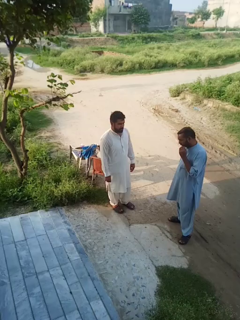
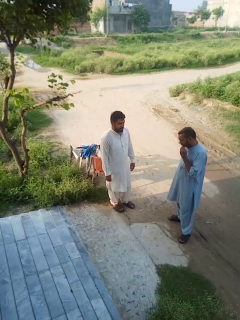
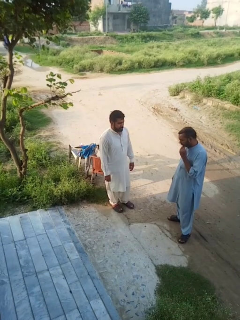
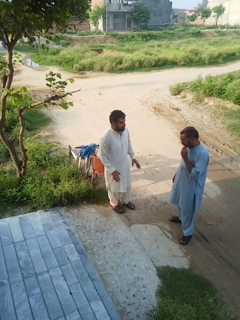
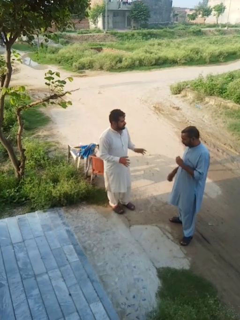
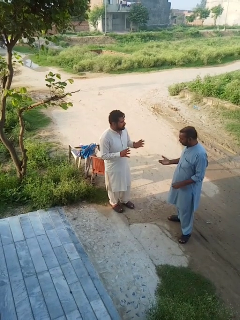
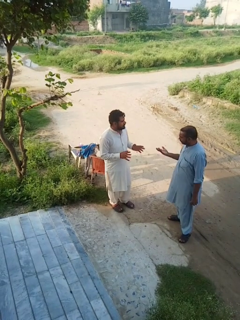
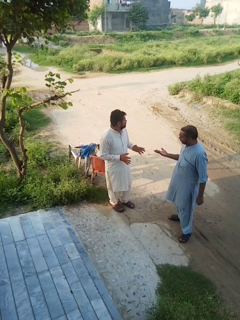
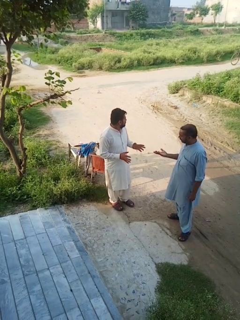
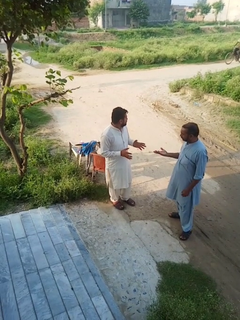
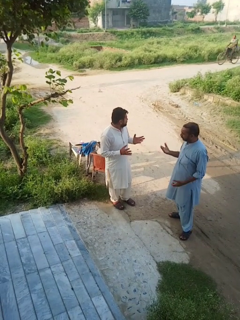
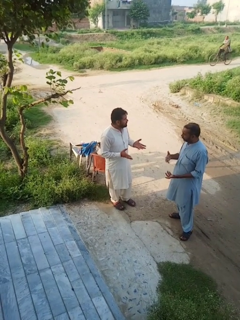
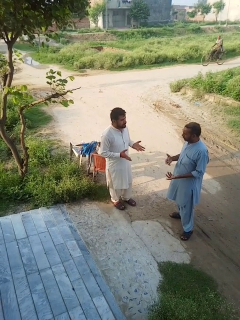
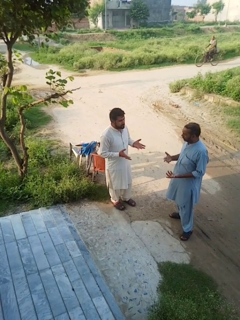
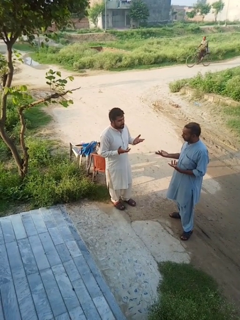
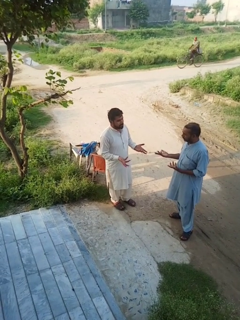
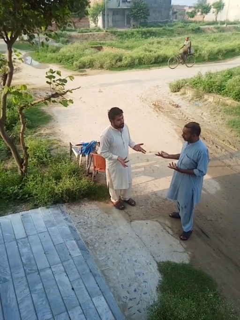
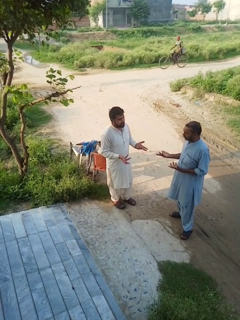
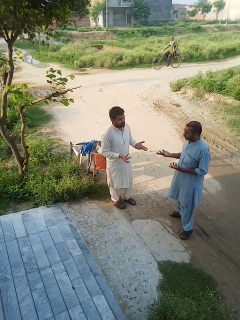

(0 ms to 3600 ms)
person talks to person

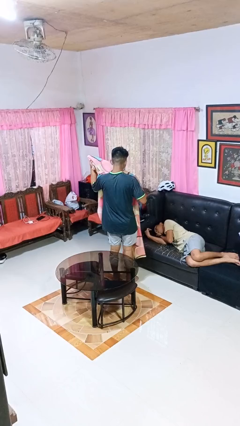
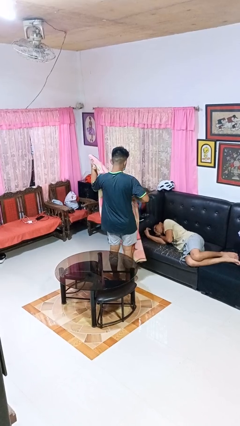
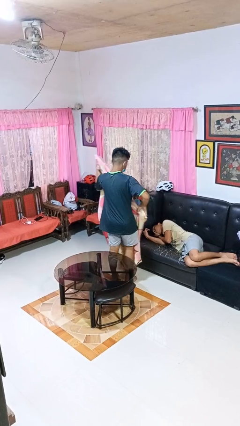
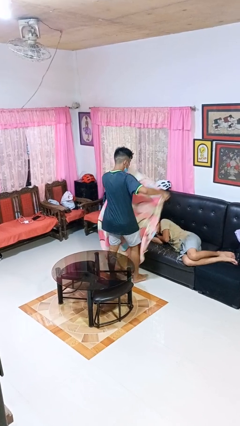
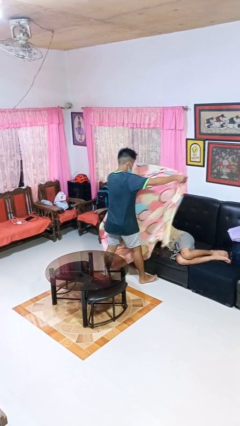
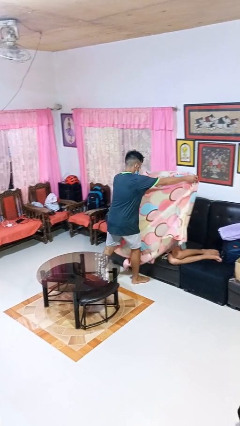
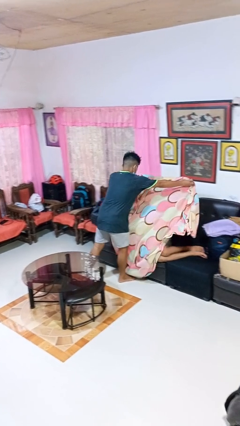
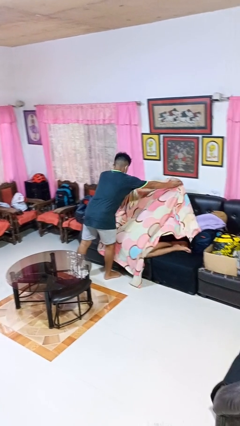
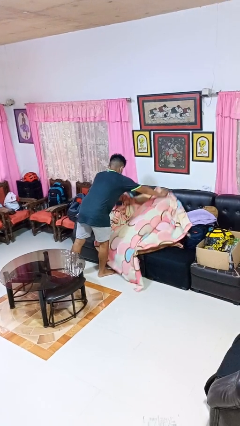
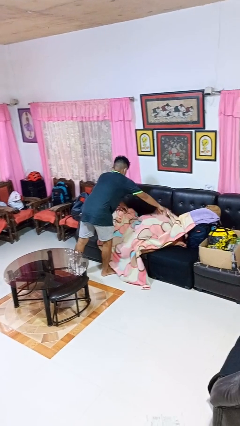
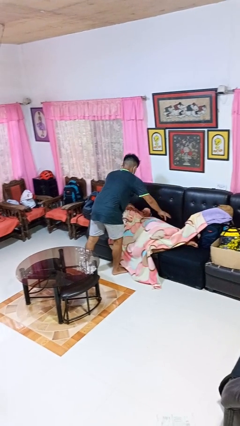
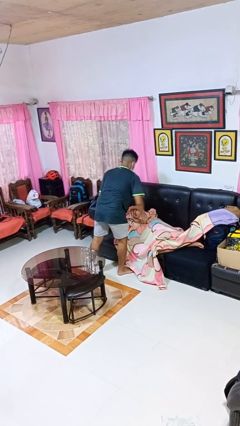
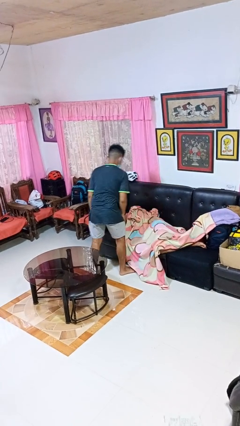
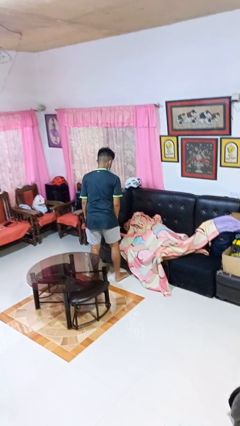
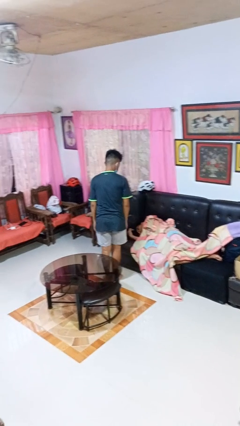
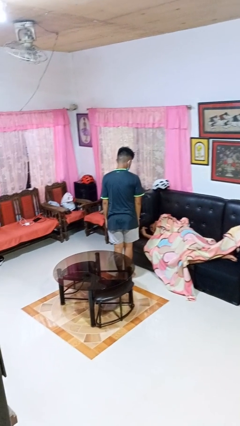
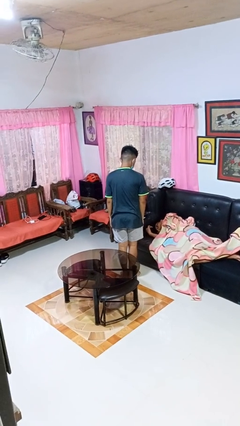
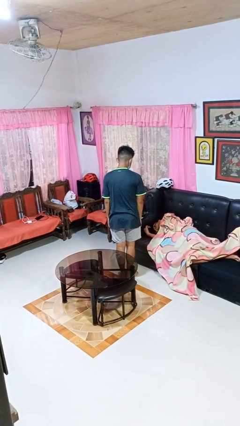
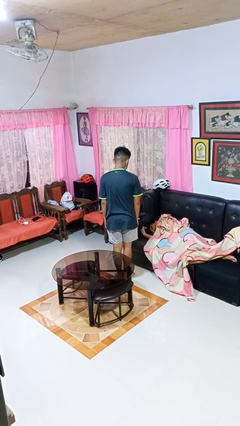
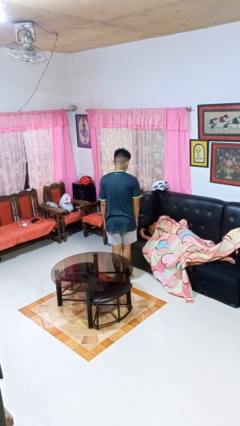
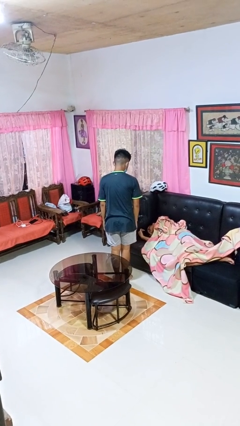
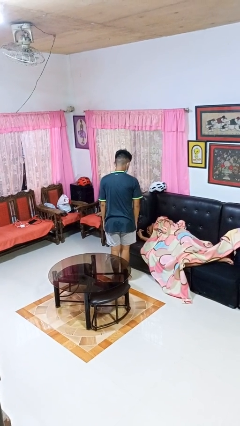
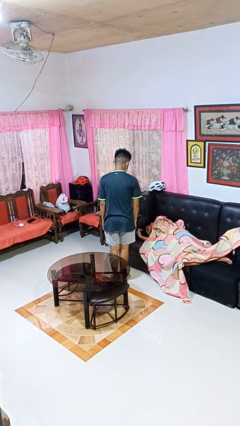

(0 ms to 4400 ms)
person covers friend with blanket

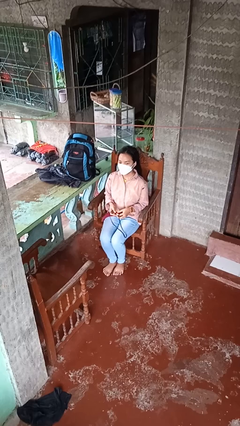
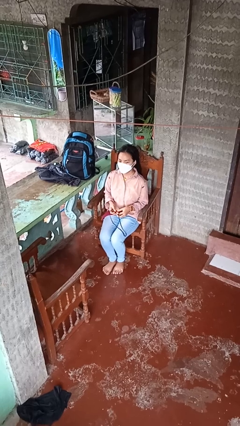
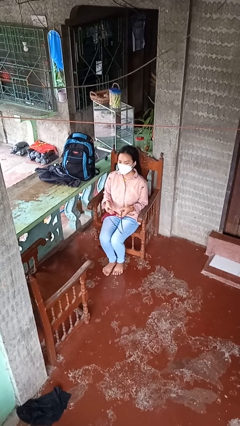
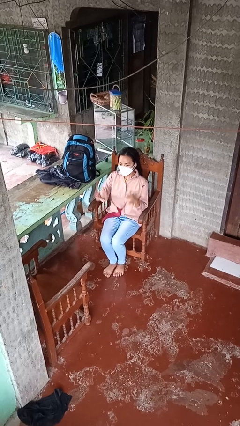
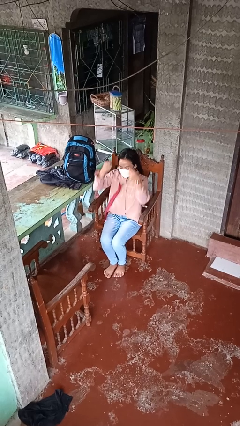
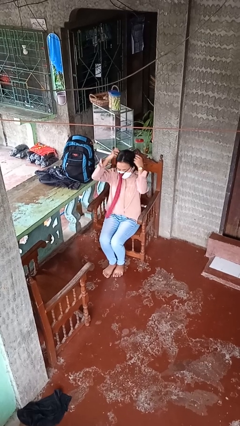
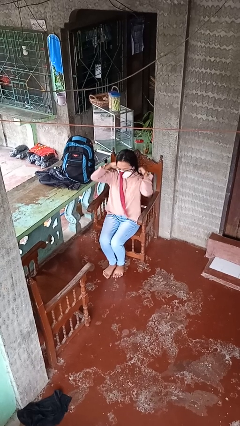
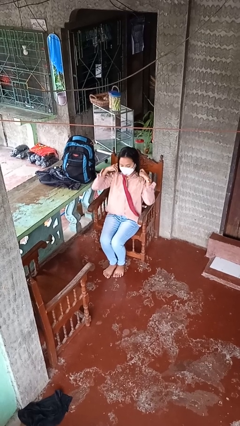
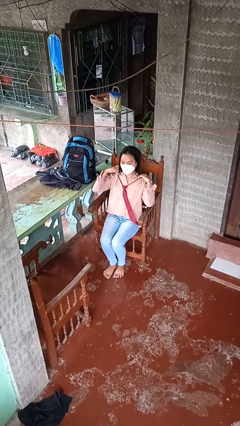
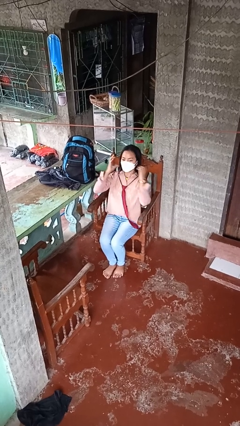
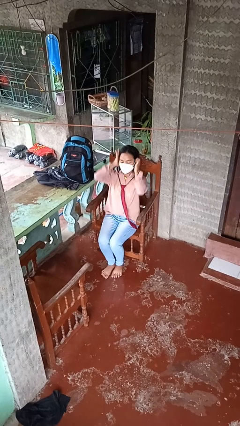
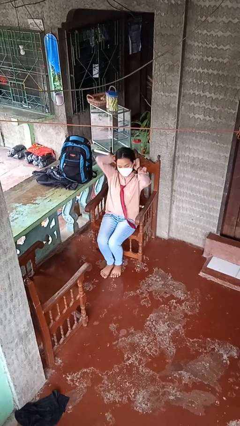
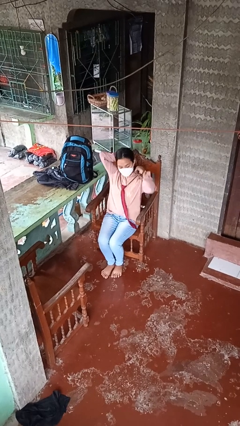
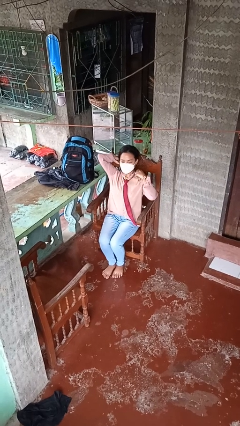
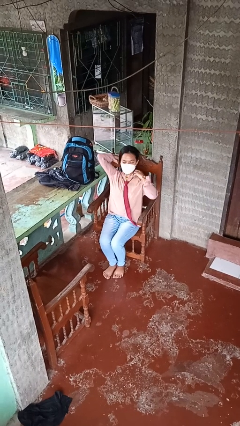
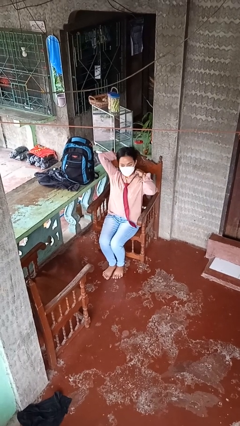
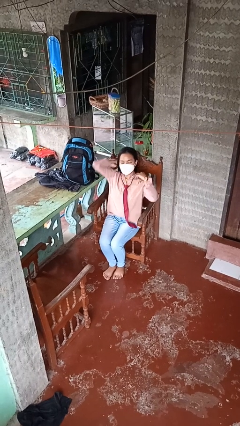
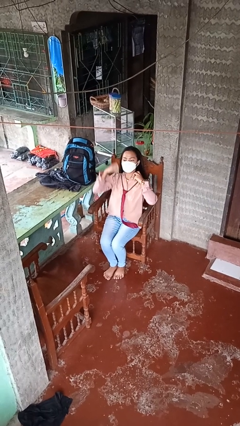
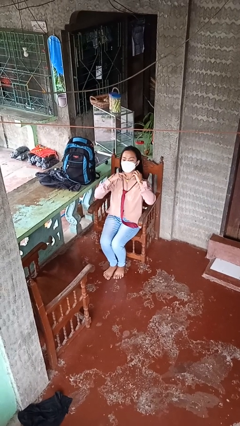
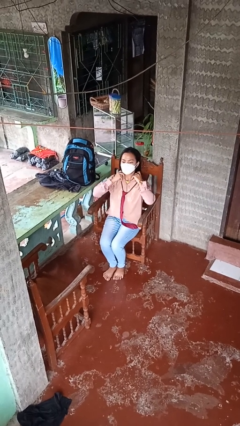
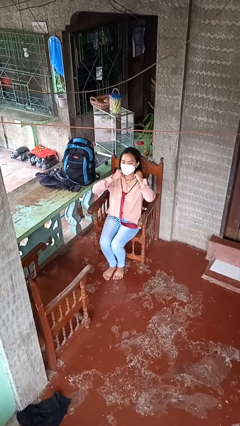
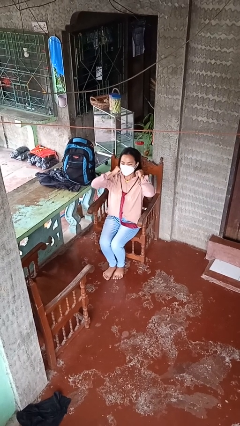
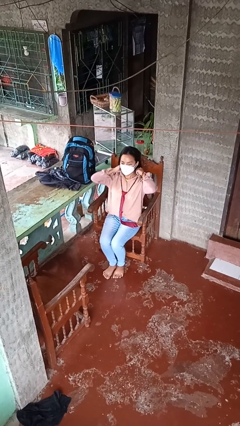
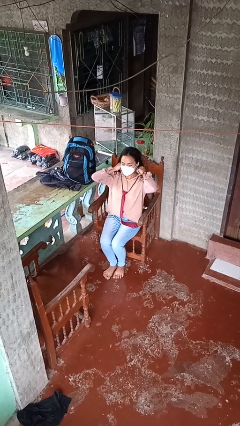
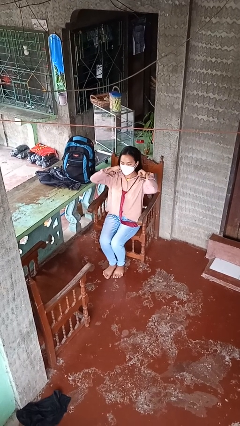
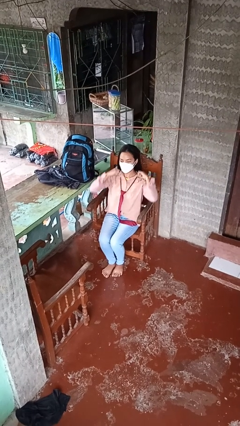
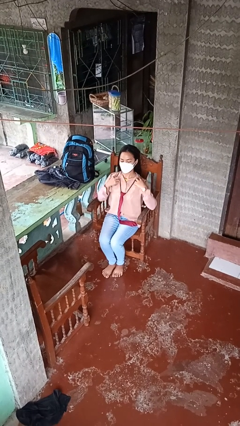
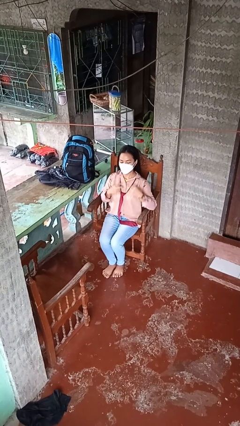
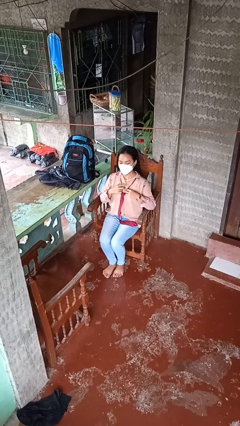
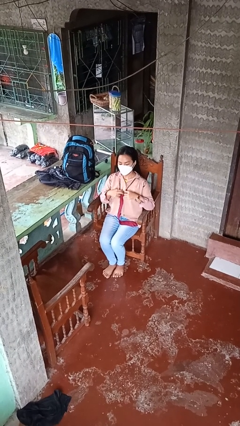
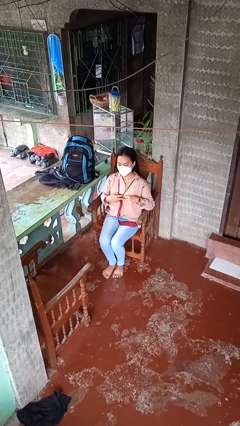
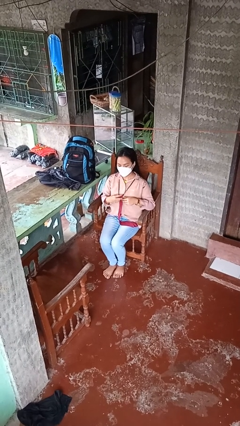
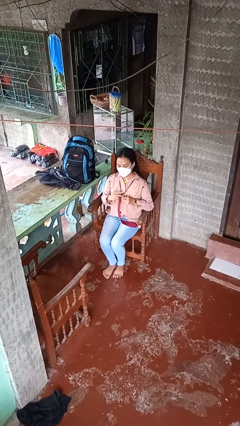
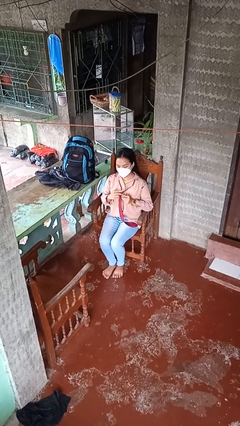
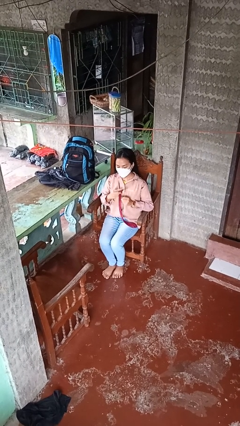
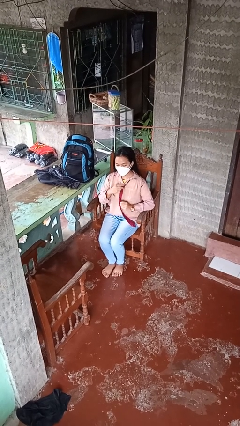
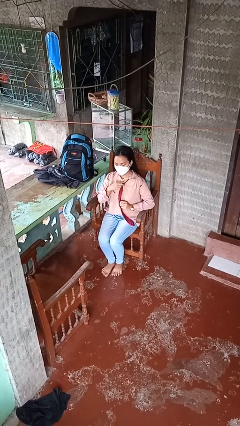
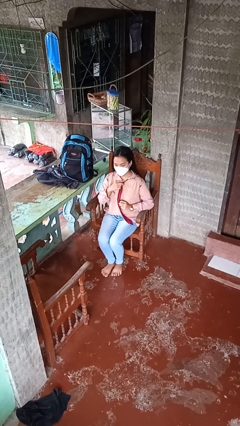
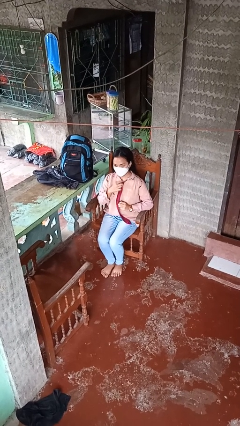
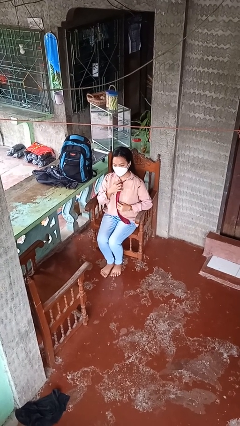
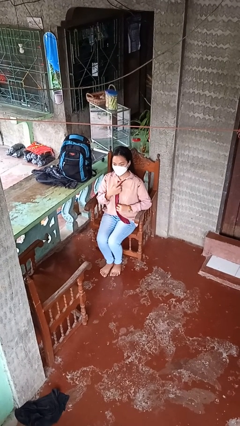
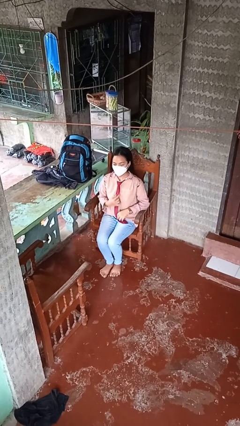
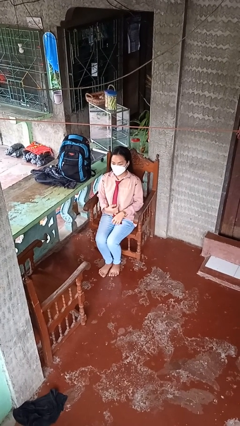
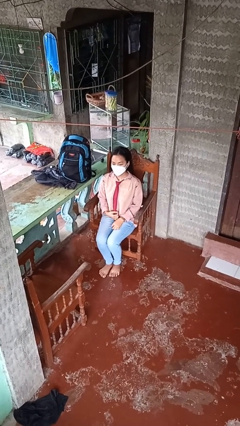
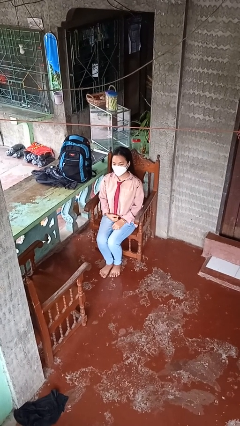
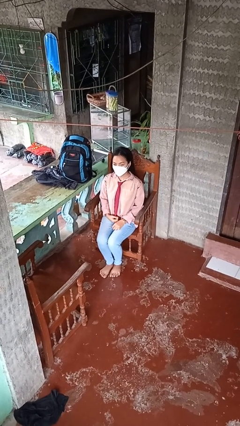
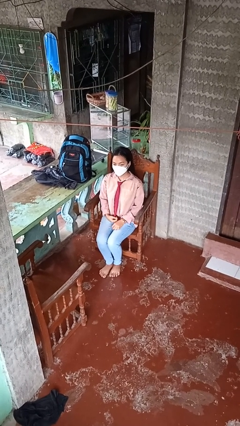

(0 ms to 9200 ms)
person puts on necktie

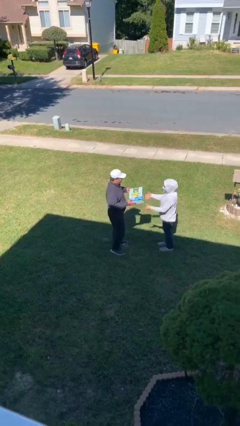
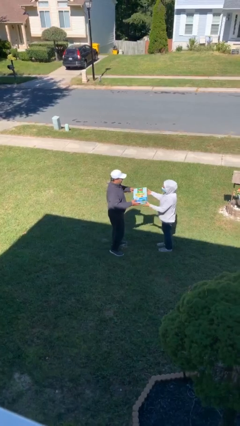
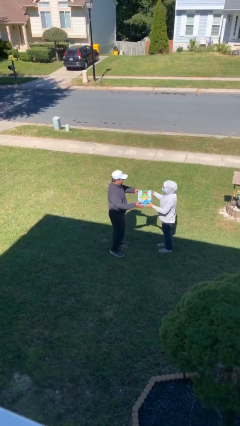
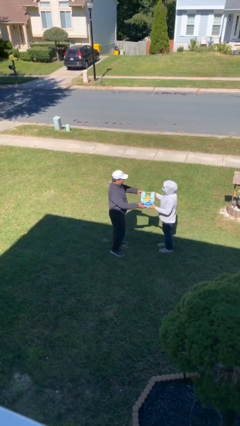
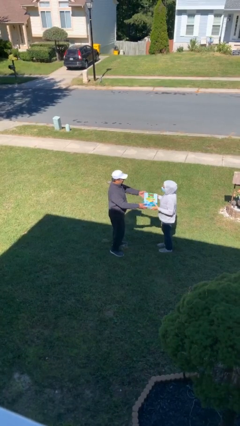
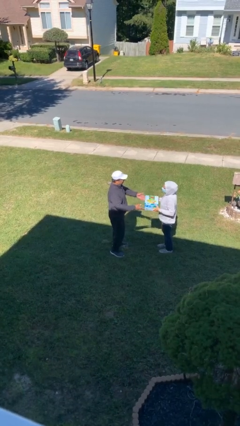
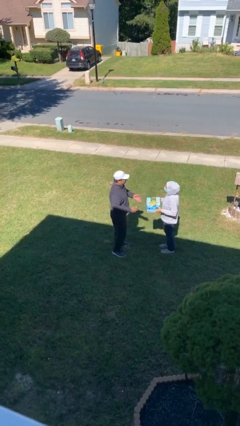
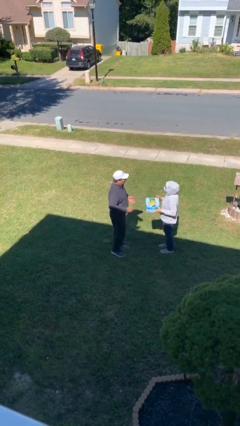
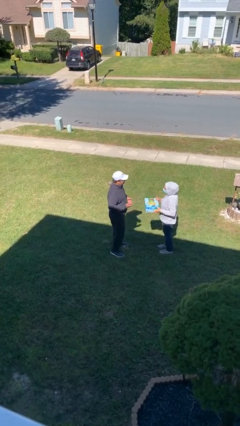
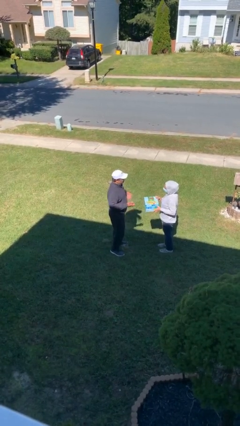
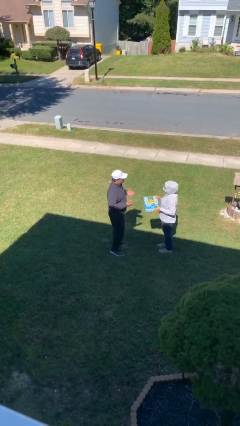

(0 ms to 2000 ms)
person transfers object to person
